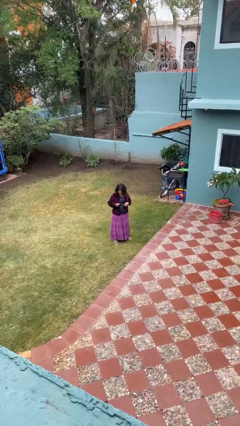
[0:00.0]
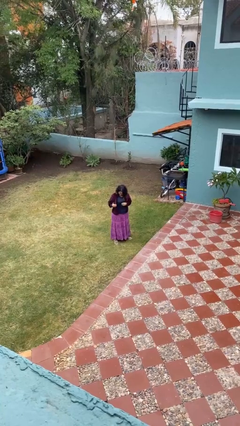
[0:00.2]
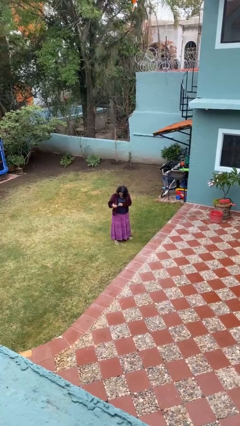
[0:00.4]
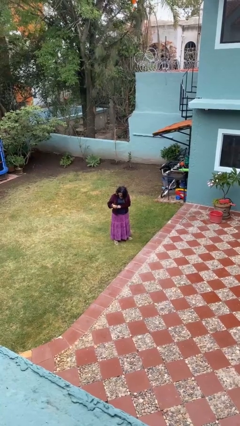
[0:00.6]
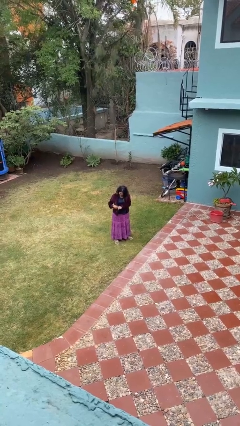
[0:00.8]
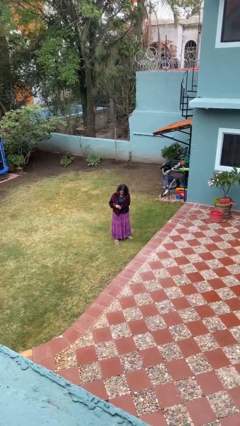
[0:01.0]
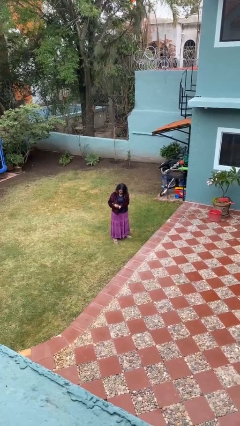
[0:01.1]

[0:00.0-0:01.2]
person puts phone into pocket

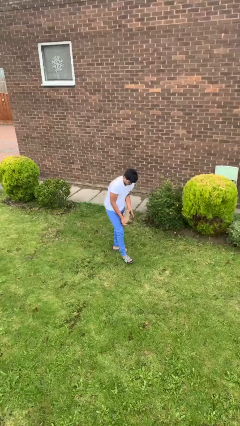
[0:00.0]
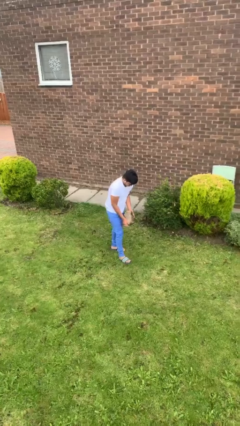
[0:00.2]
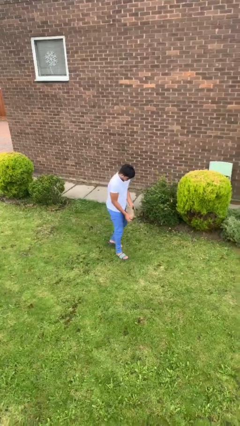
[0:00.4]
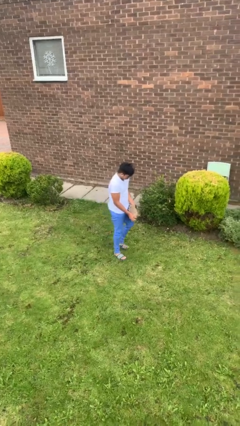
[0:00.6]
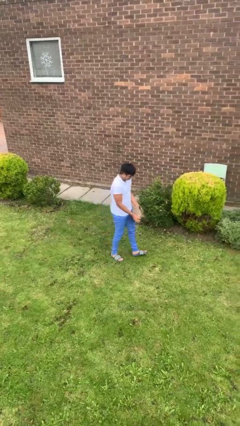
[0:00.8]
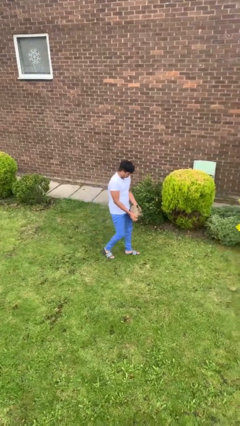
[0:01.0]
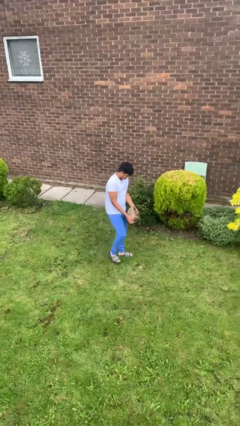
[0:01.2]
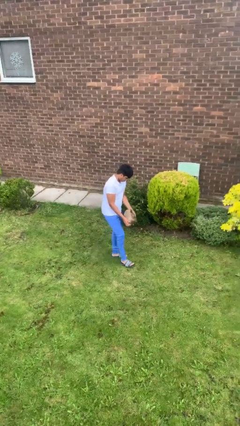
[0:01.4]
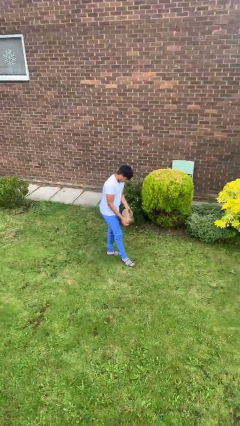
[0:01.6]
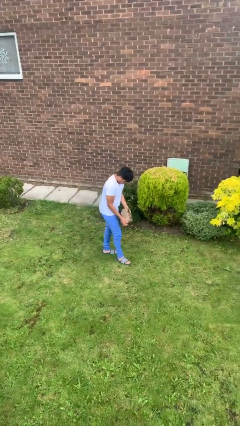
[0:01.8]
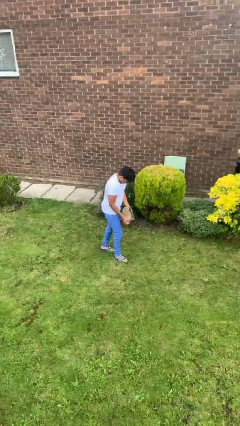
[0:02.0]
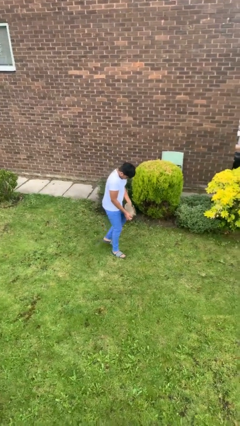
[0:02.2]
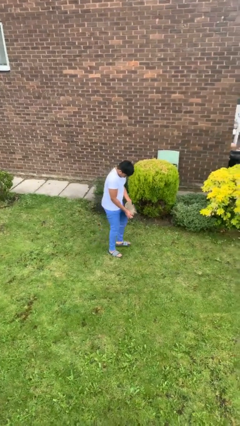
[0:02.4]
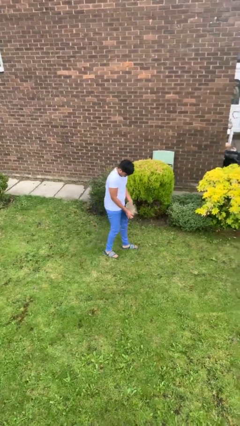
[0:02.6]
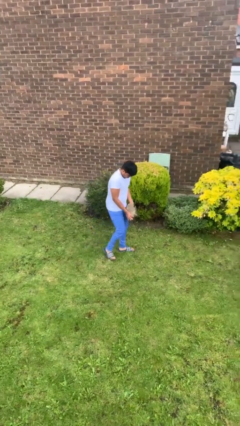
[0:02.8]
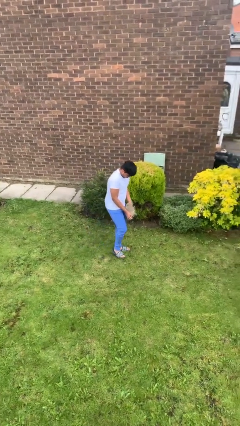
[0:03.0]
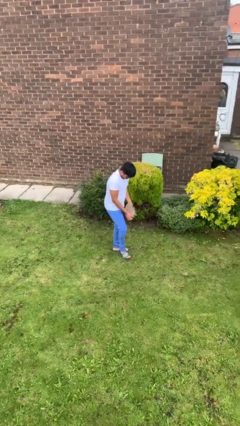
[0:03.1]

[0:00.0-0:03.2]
person carries heavy object

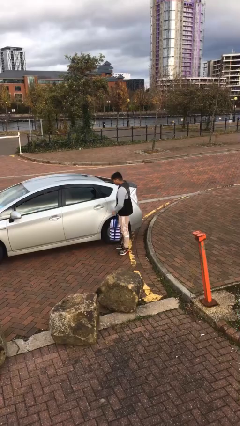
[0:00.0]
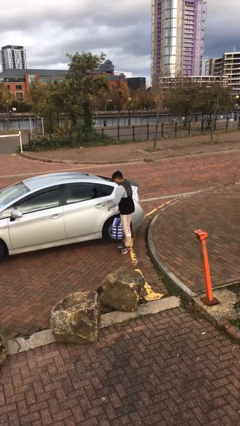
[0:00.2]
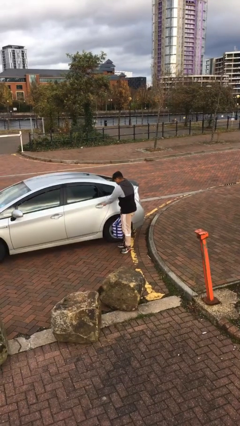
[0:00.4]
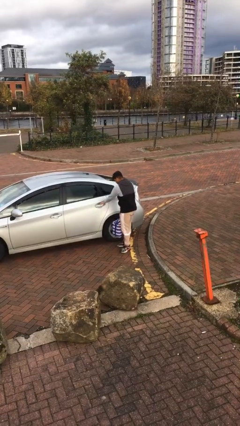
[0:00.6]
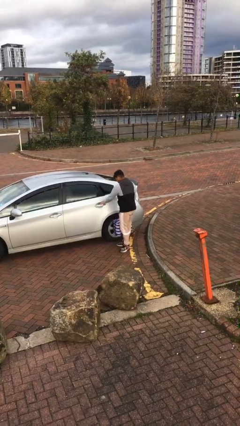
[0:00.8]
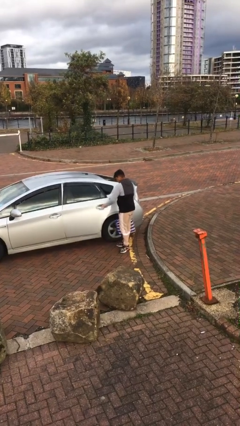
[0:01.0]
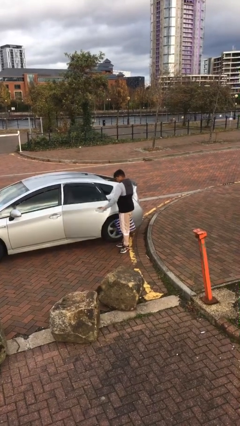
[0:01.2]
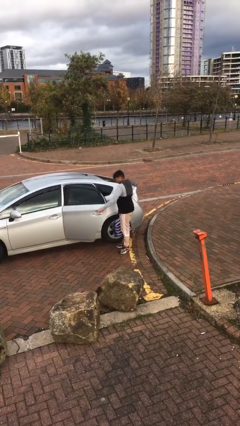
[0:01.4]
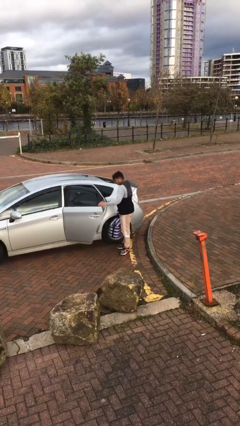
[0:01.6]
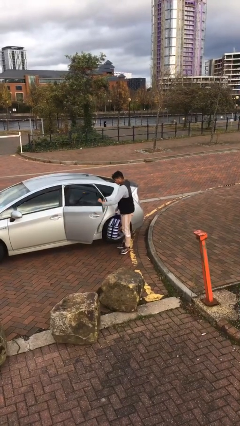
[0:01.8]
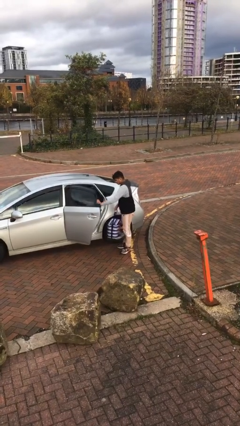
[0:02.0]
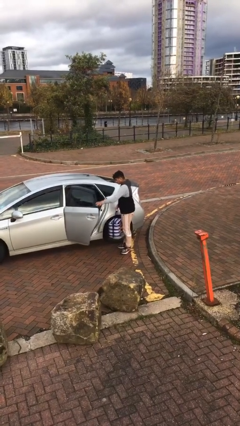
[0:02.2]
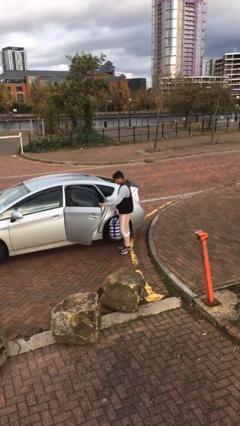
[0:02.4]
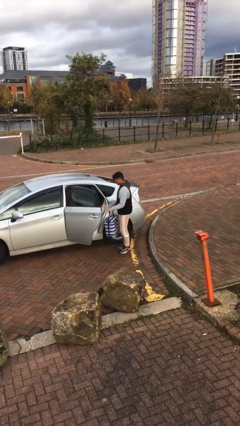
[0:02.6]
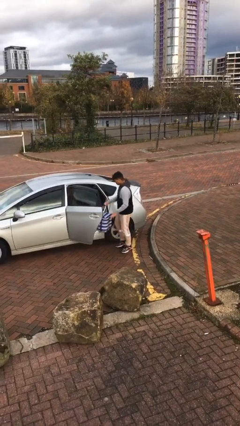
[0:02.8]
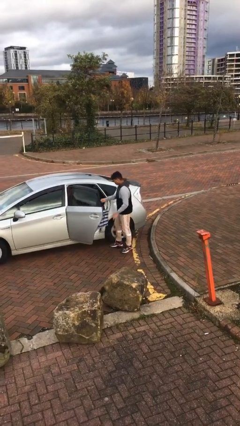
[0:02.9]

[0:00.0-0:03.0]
person opens car door

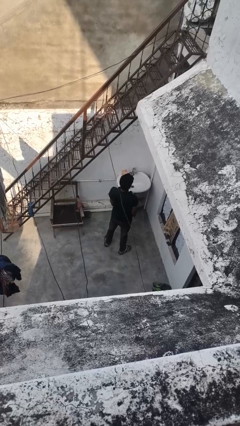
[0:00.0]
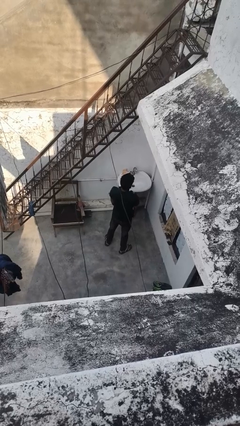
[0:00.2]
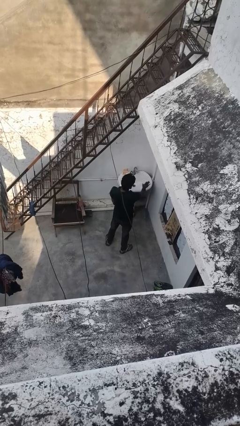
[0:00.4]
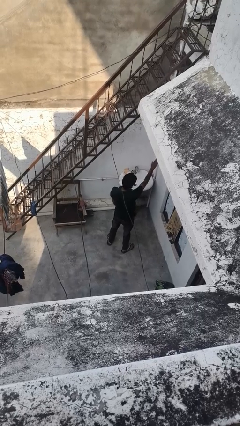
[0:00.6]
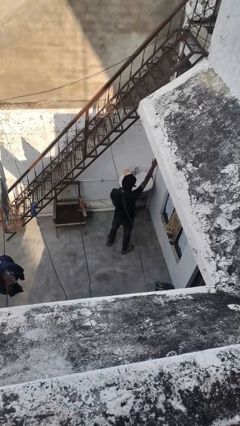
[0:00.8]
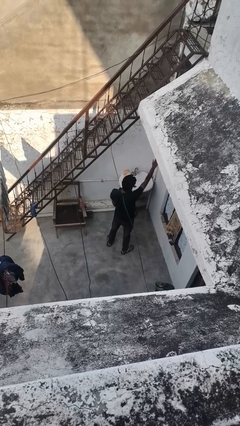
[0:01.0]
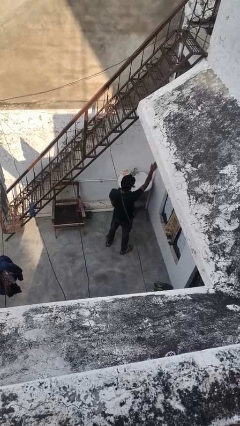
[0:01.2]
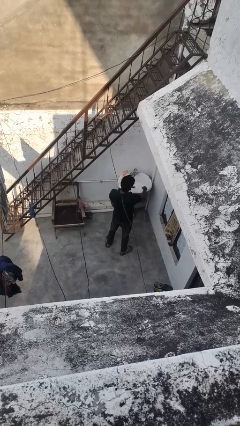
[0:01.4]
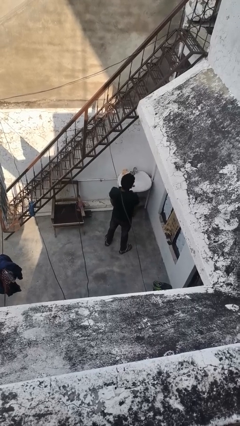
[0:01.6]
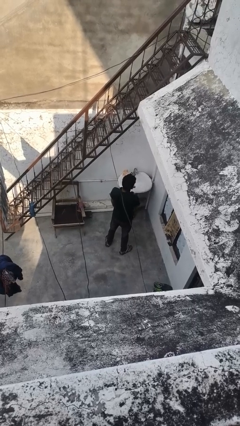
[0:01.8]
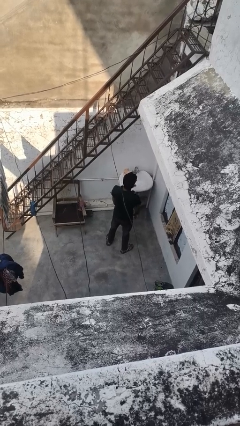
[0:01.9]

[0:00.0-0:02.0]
person gestures stop

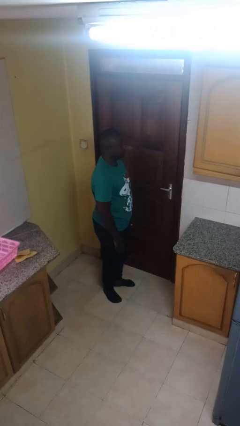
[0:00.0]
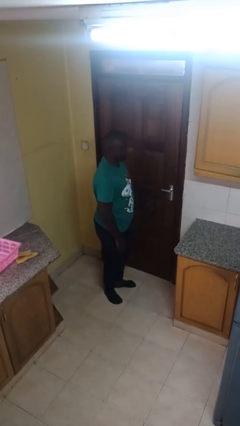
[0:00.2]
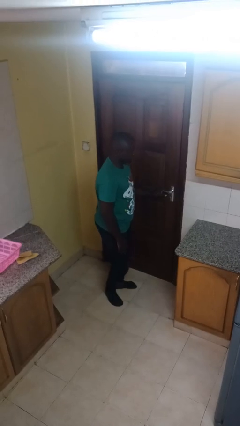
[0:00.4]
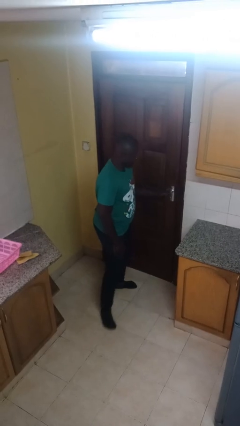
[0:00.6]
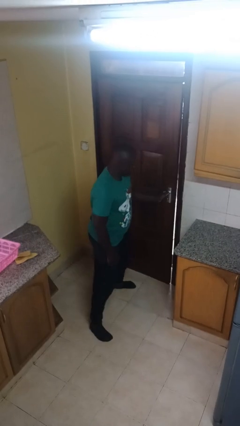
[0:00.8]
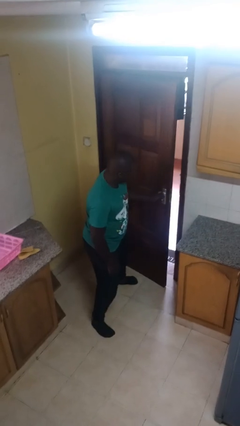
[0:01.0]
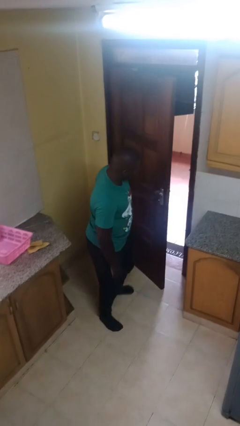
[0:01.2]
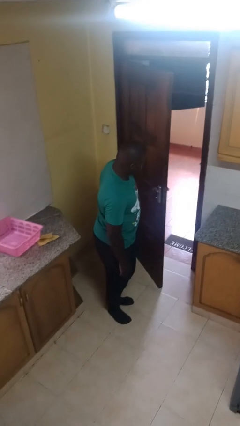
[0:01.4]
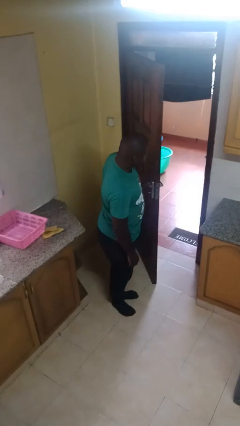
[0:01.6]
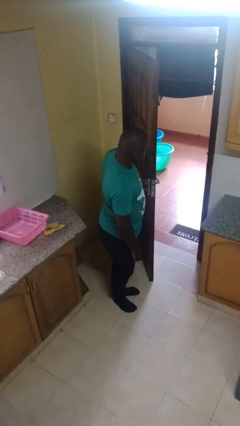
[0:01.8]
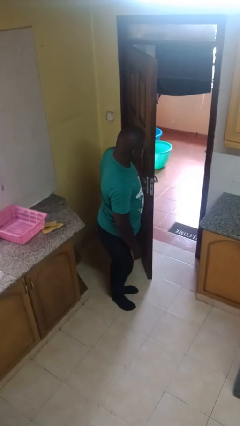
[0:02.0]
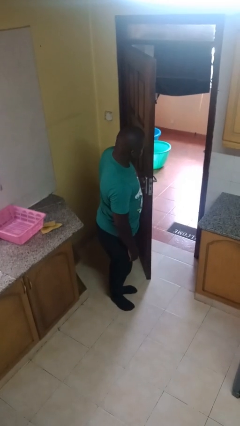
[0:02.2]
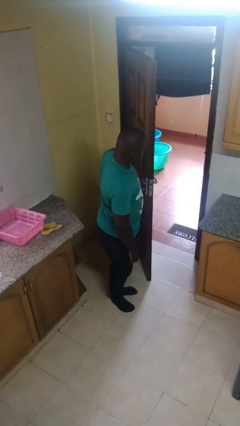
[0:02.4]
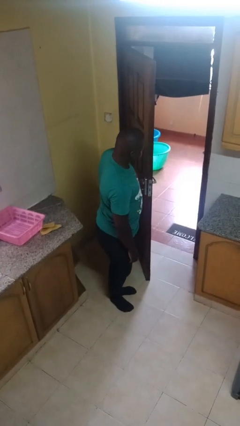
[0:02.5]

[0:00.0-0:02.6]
person opens facility door

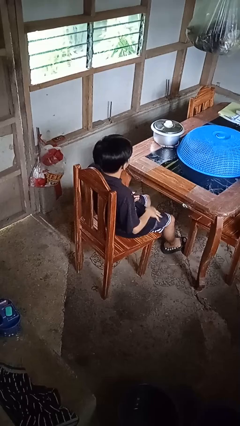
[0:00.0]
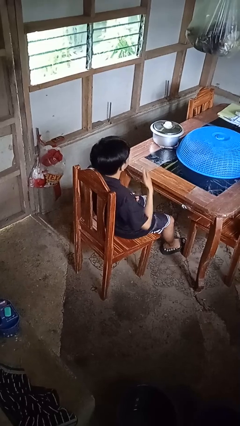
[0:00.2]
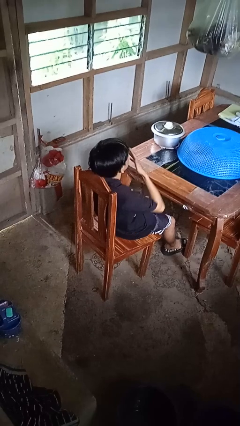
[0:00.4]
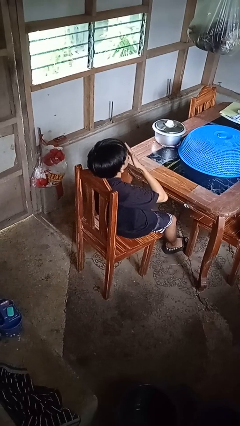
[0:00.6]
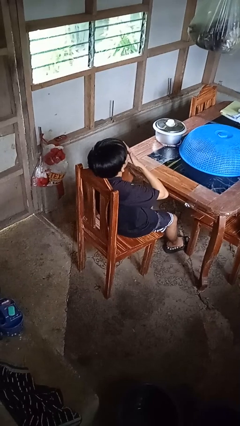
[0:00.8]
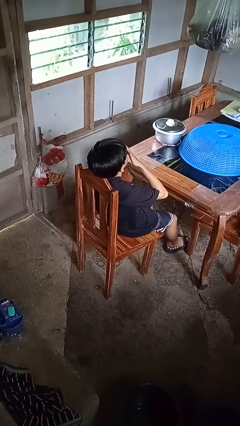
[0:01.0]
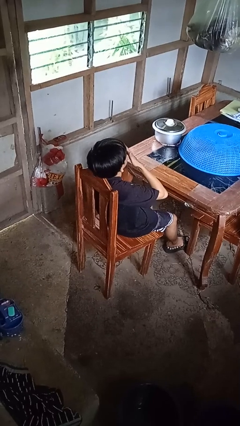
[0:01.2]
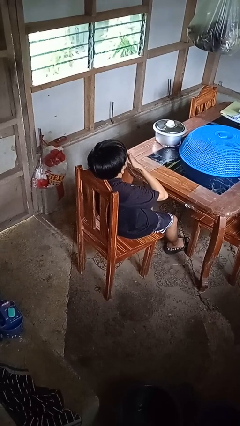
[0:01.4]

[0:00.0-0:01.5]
person yawns

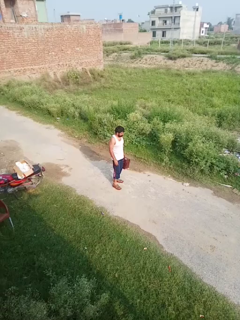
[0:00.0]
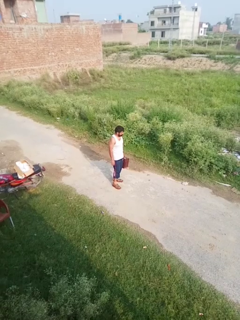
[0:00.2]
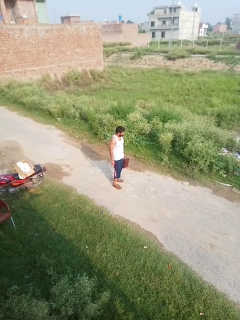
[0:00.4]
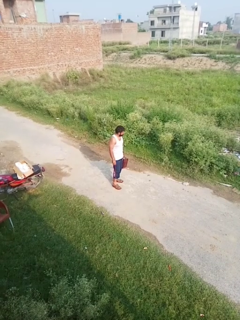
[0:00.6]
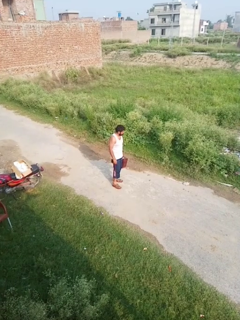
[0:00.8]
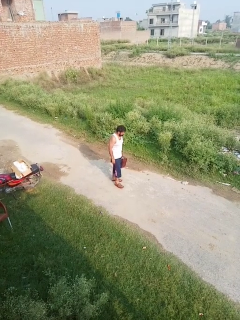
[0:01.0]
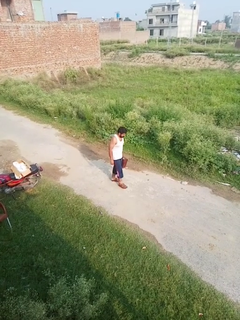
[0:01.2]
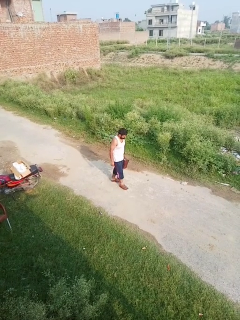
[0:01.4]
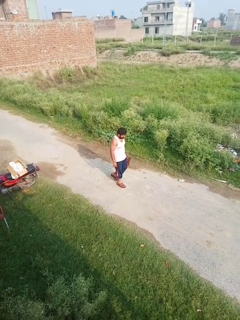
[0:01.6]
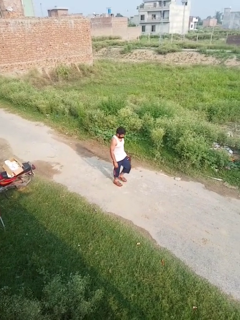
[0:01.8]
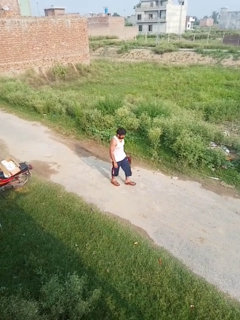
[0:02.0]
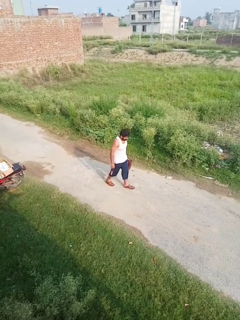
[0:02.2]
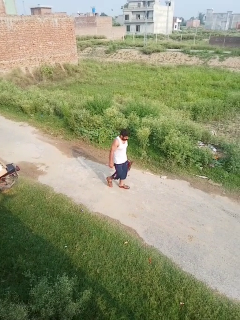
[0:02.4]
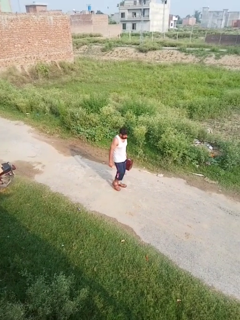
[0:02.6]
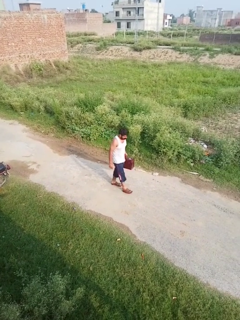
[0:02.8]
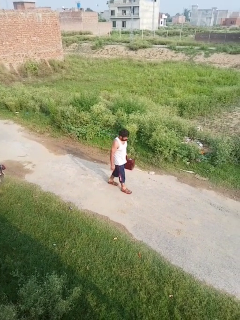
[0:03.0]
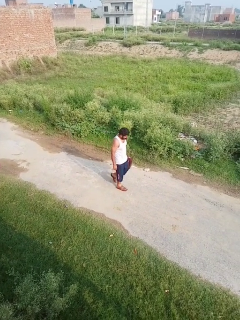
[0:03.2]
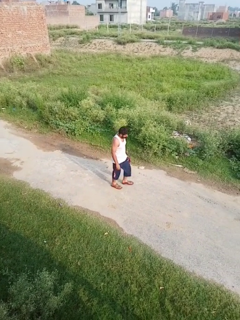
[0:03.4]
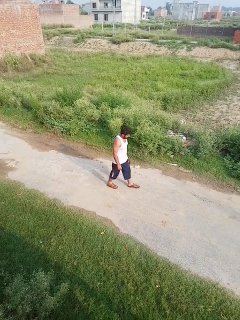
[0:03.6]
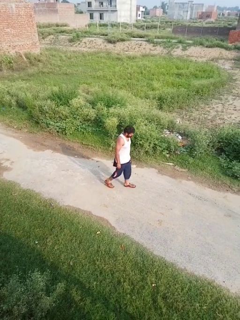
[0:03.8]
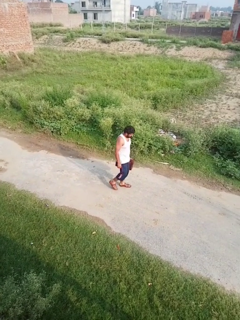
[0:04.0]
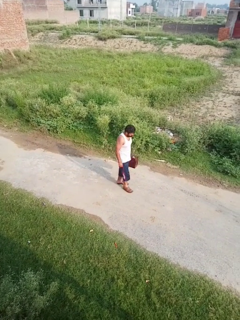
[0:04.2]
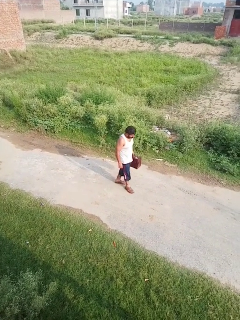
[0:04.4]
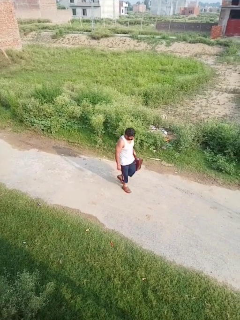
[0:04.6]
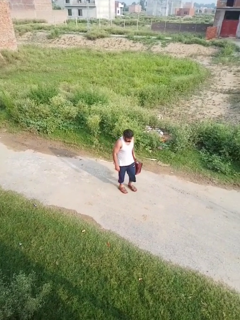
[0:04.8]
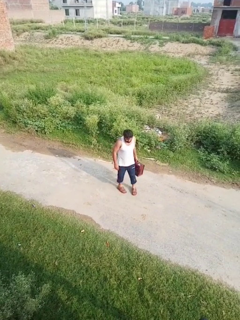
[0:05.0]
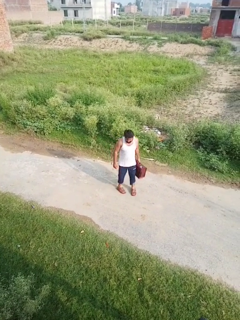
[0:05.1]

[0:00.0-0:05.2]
person carries groceries
